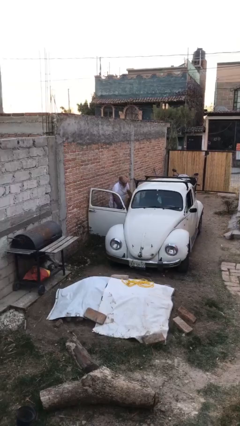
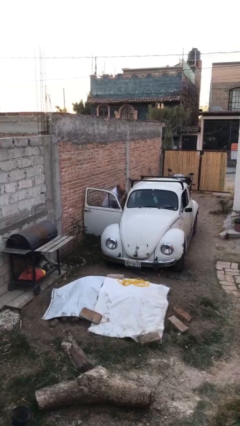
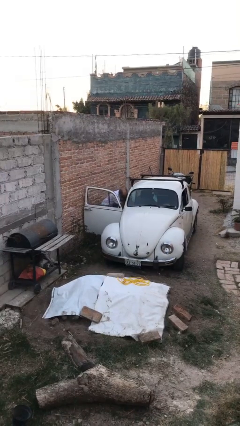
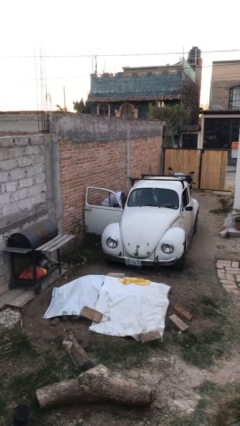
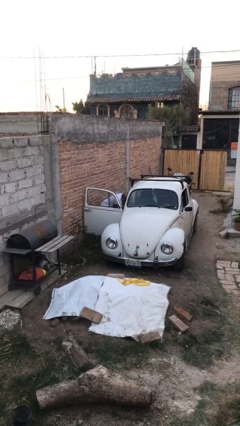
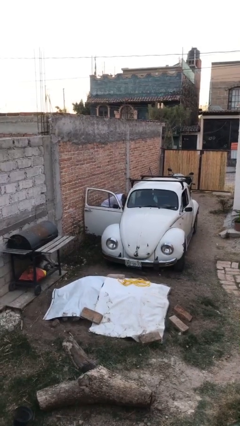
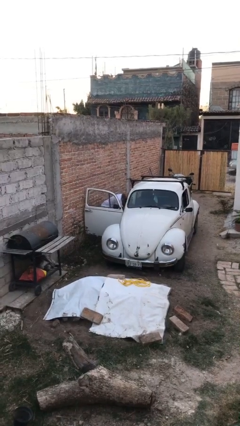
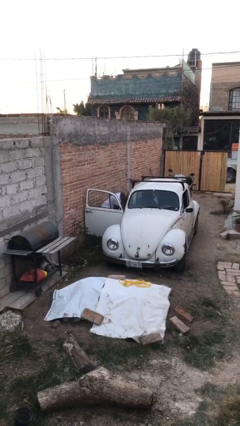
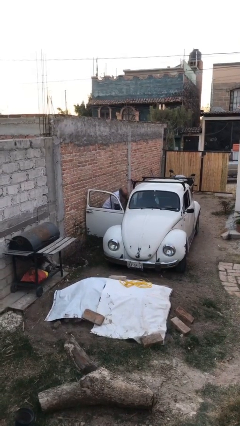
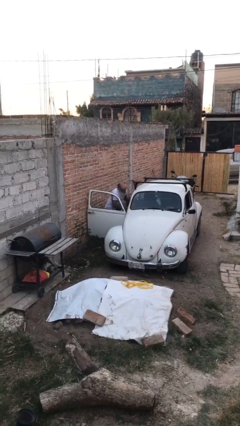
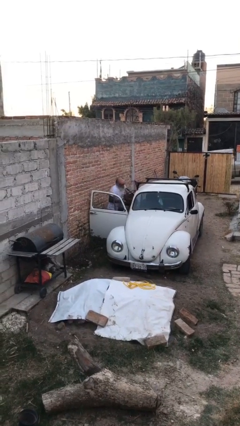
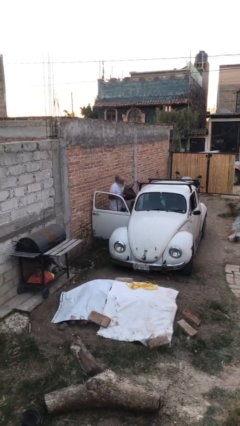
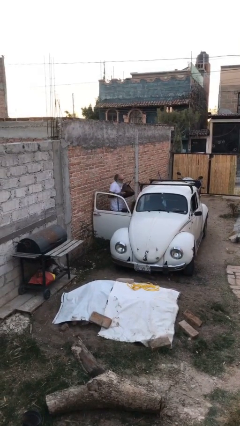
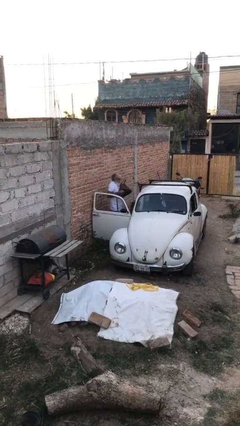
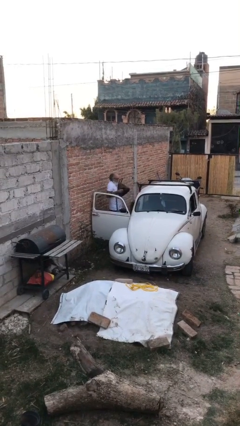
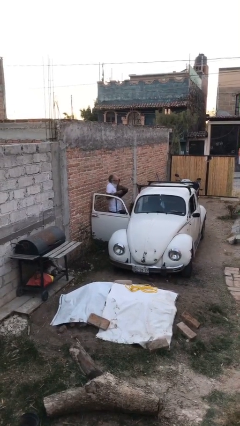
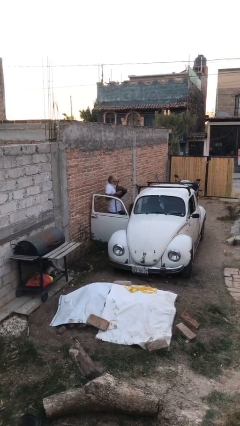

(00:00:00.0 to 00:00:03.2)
person unloads car

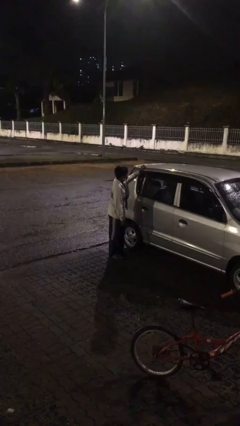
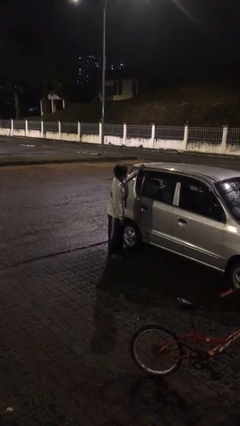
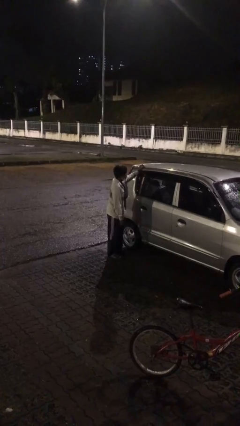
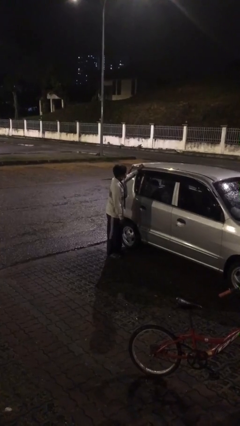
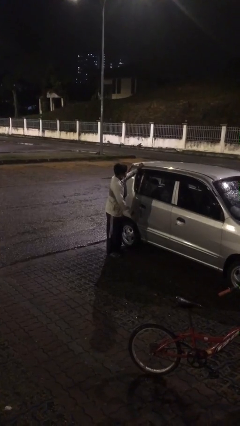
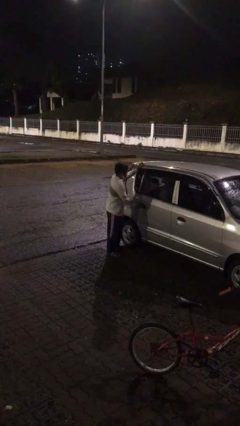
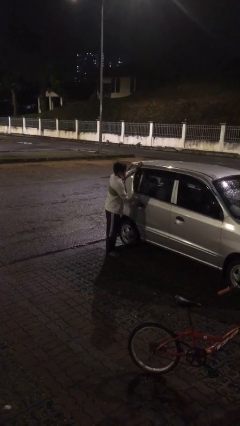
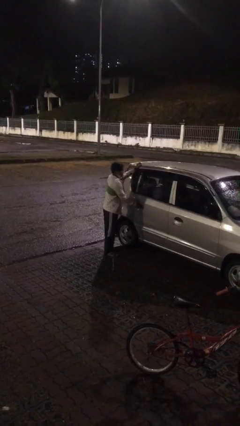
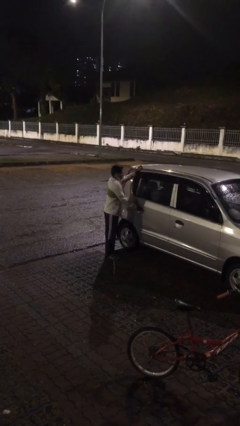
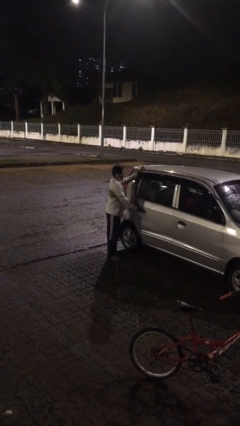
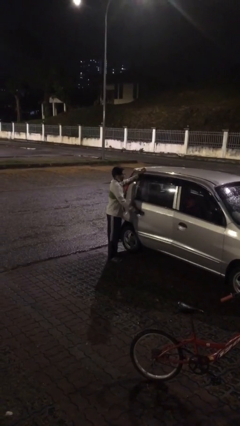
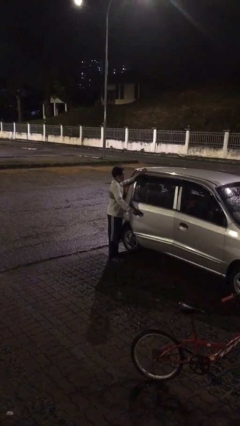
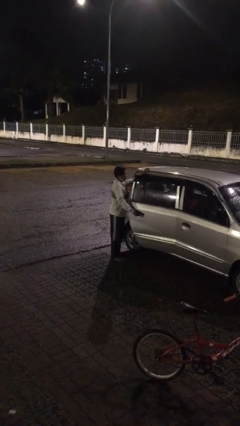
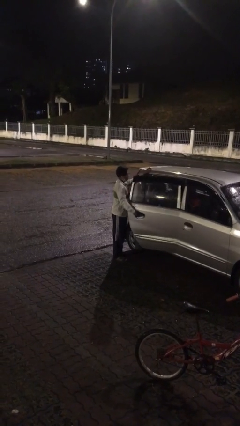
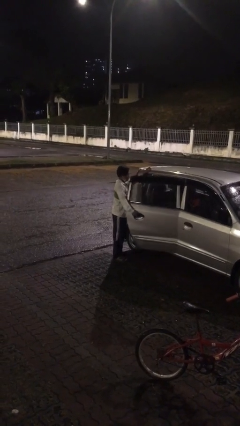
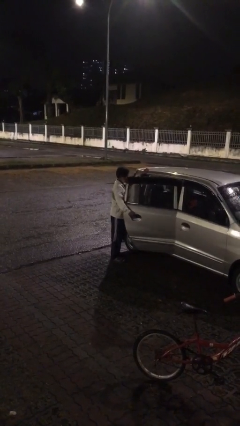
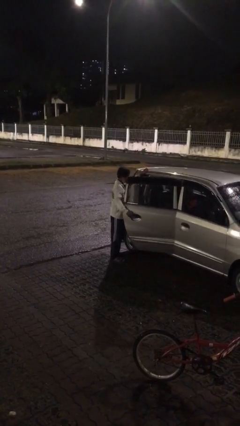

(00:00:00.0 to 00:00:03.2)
person opens car door

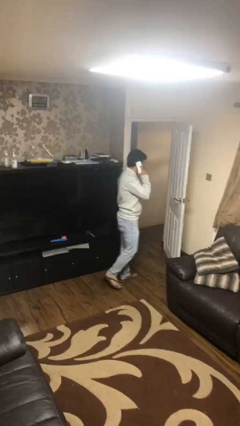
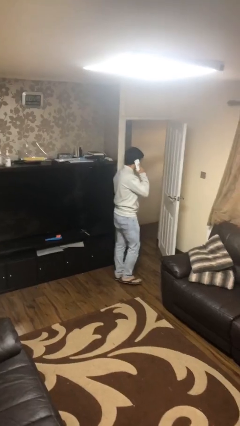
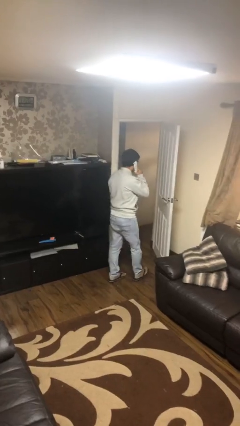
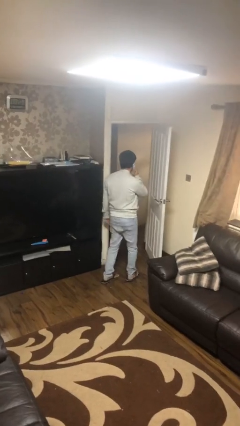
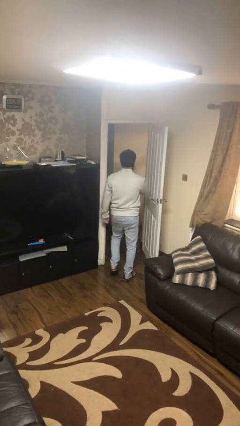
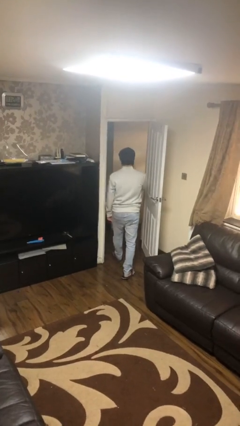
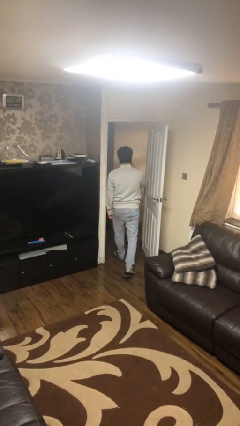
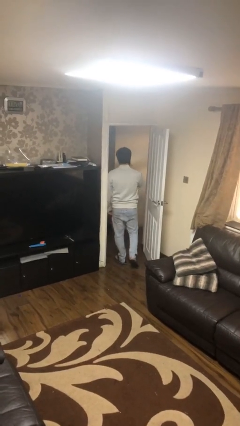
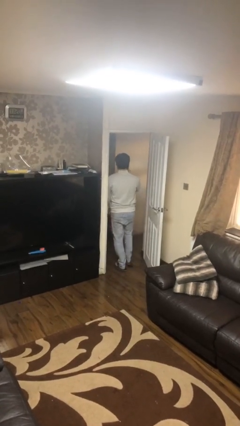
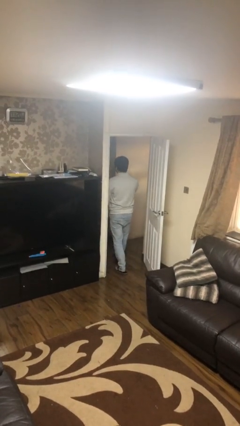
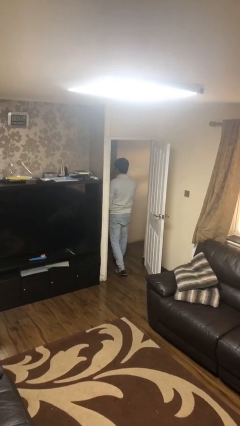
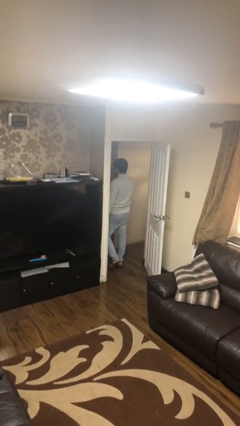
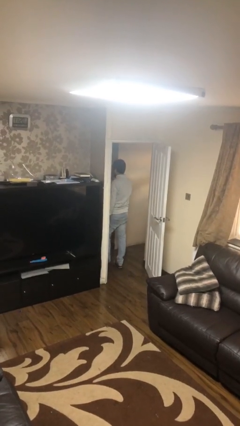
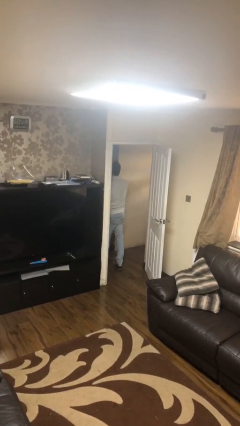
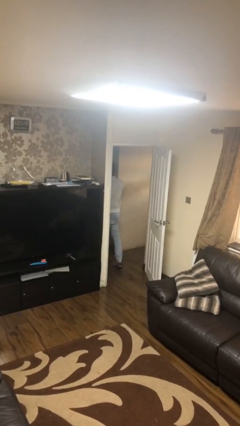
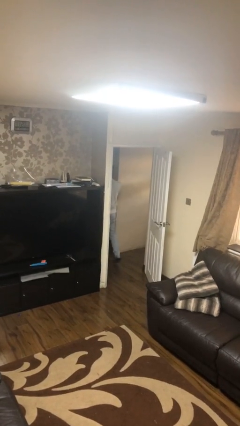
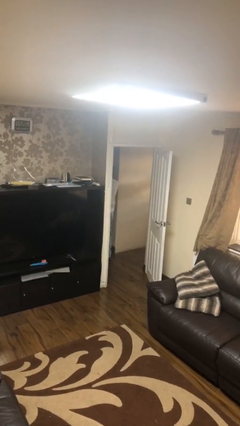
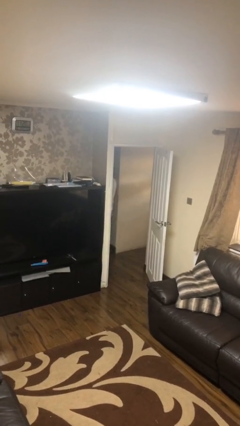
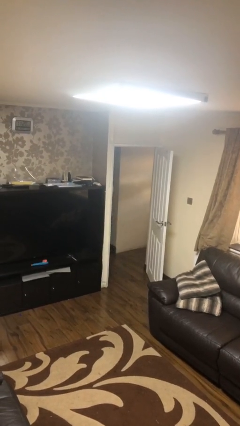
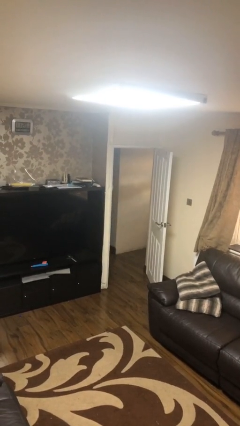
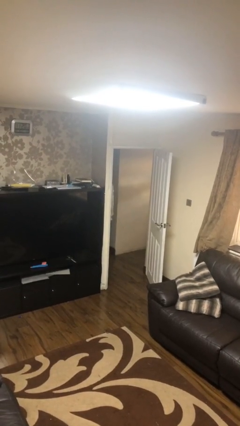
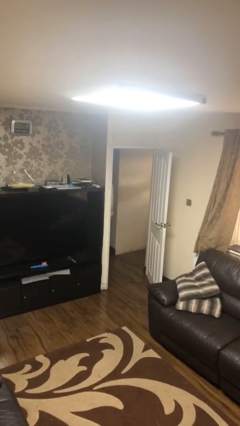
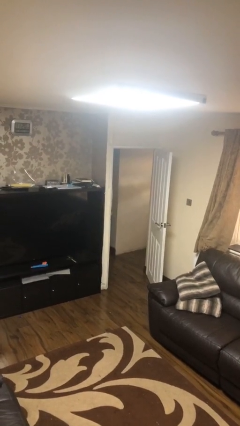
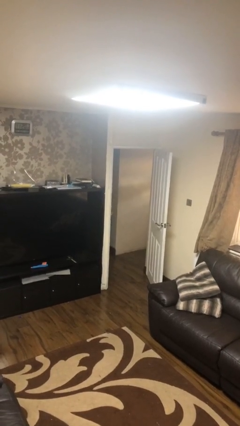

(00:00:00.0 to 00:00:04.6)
person exits scene through structure

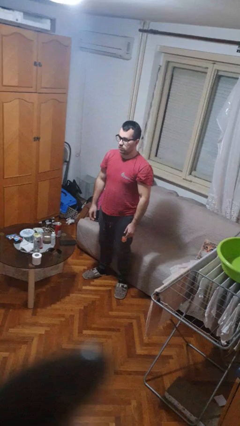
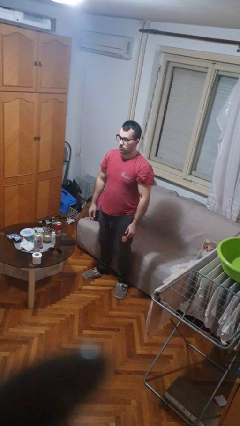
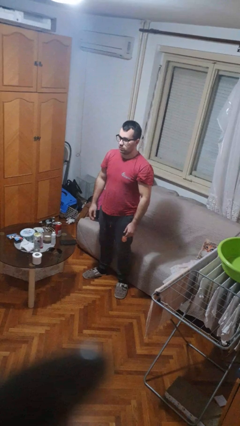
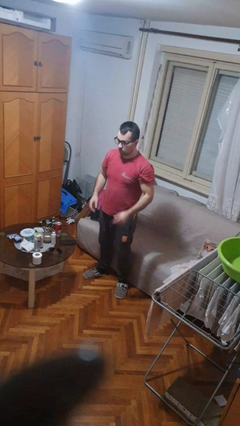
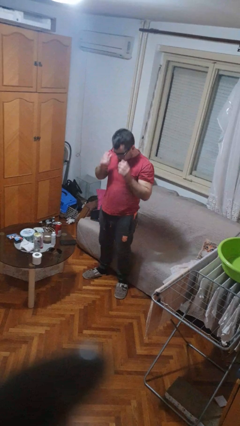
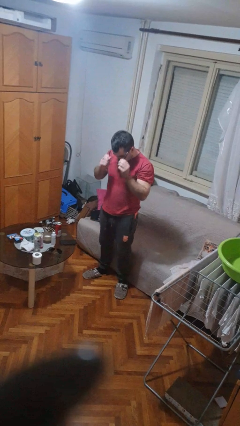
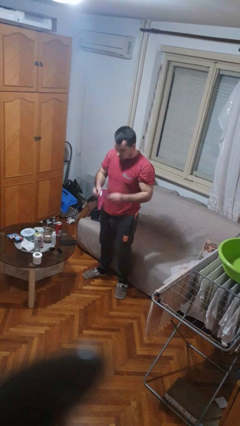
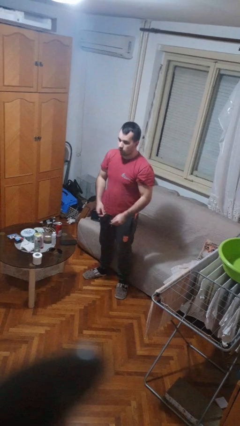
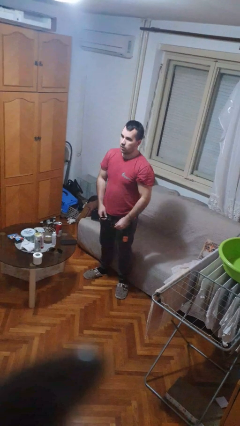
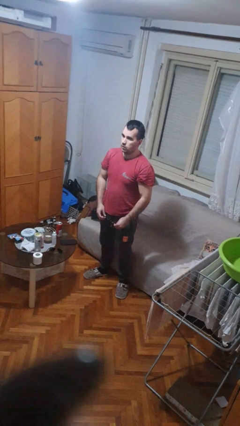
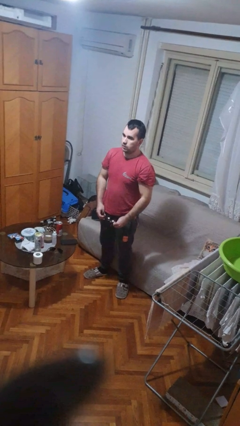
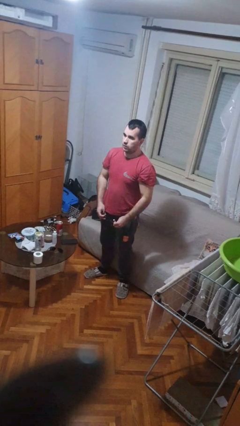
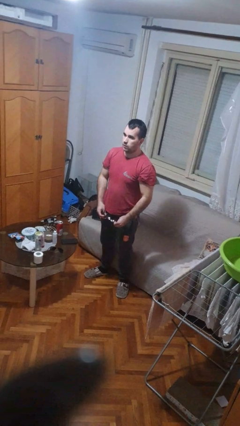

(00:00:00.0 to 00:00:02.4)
person takes off glasses

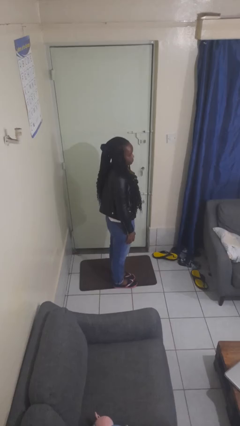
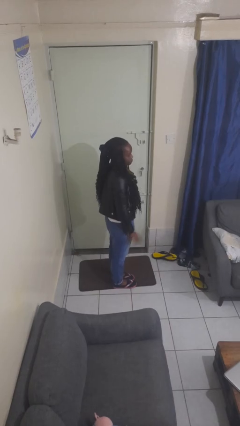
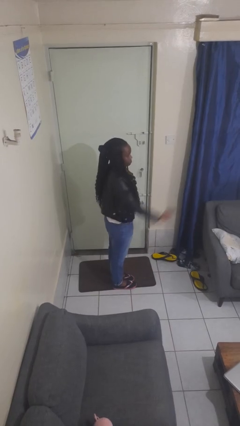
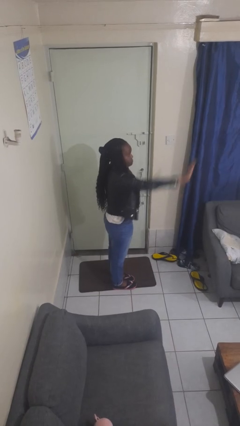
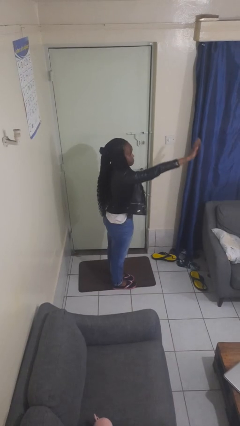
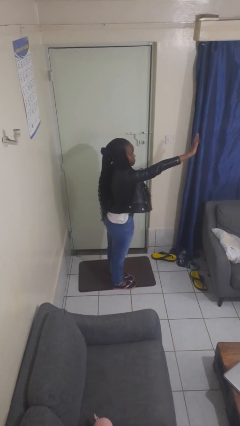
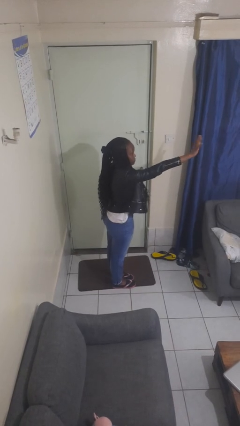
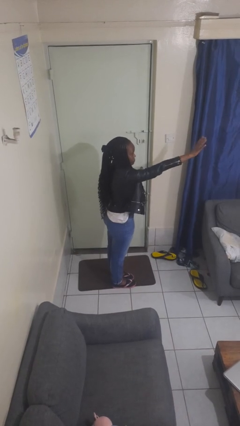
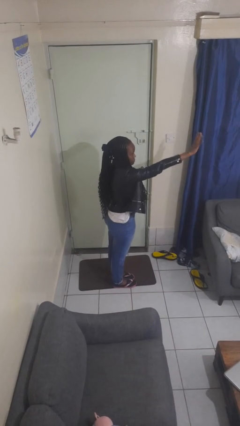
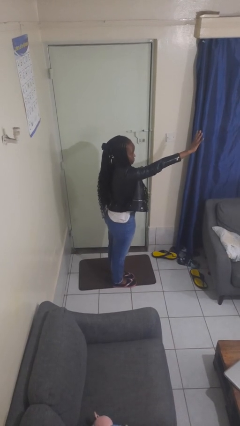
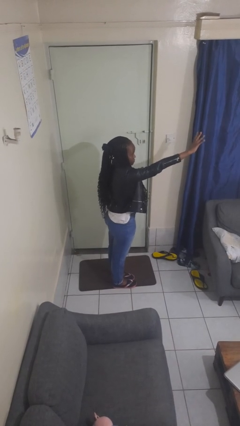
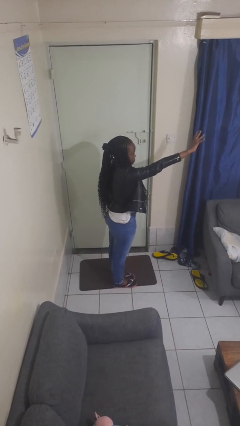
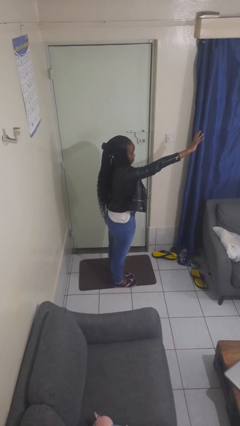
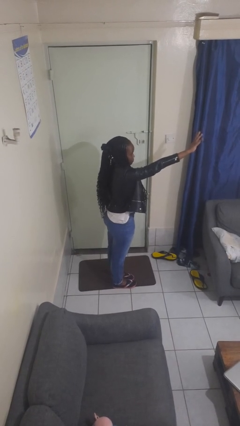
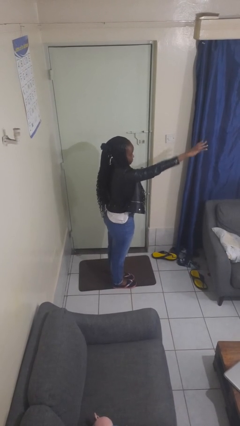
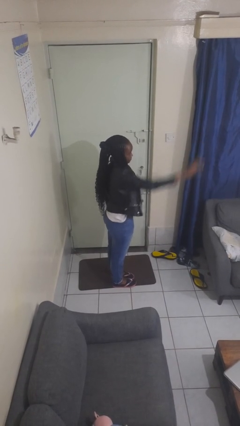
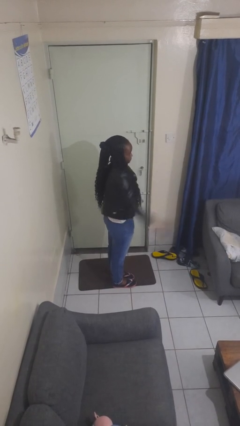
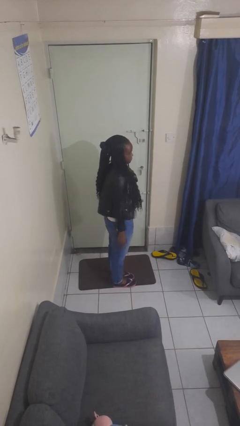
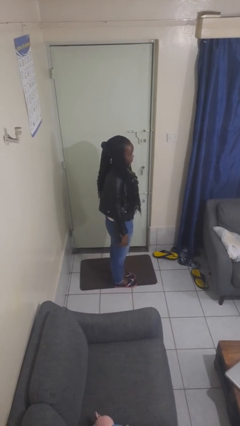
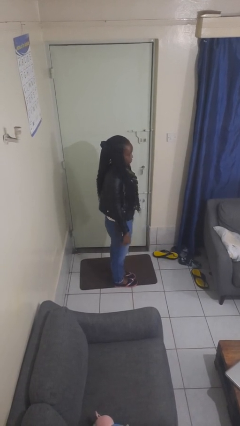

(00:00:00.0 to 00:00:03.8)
person waves at person

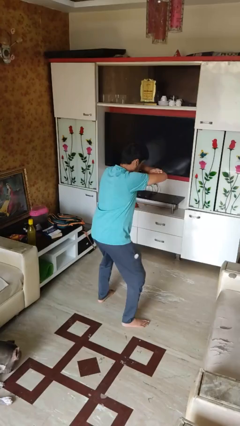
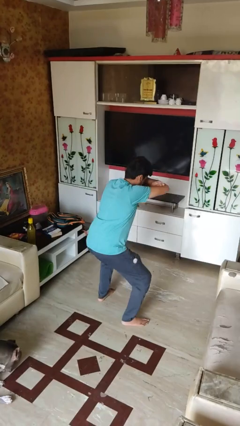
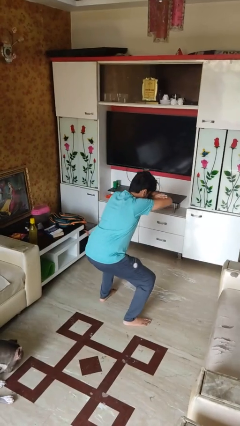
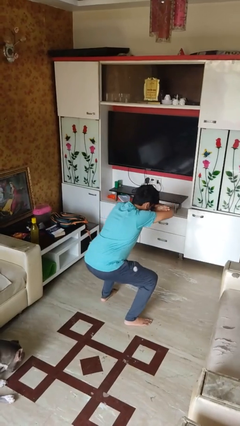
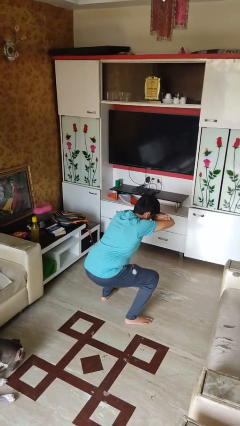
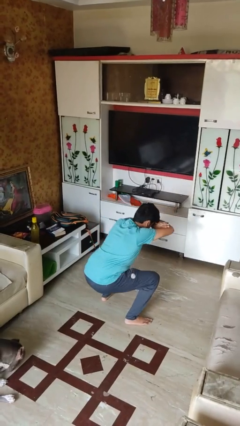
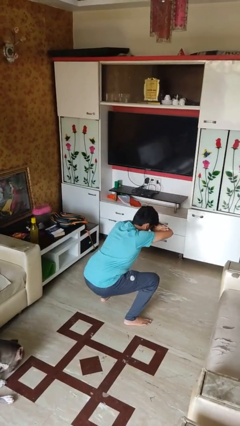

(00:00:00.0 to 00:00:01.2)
person squats
